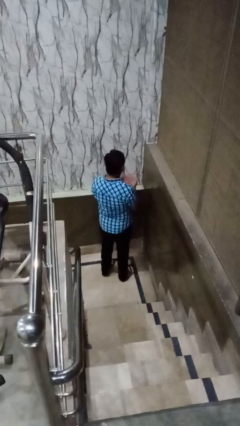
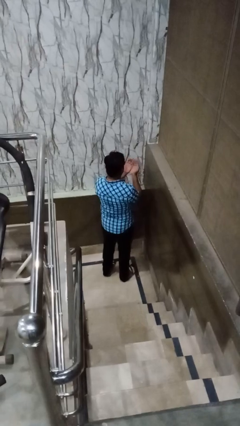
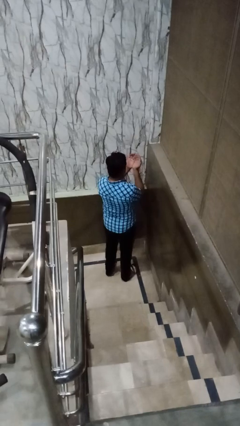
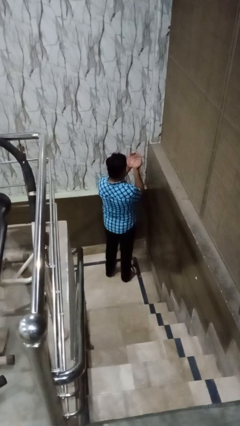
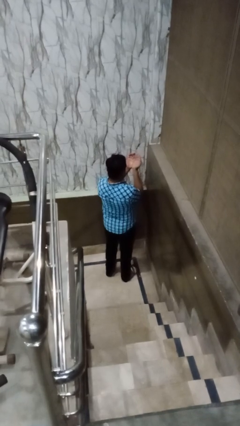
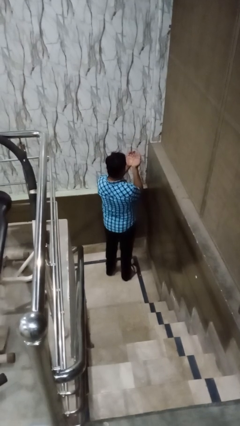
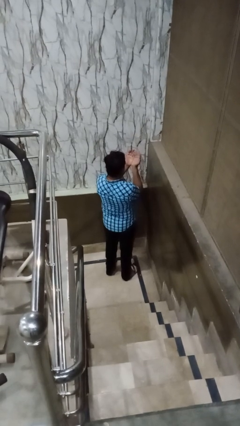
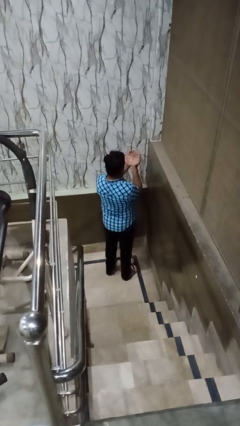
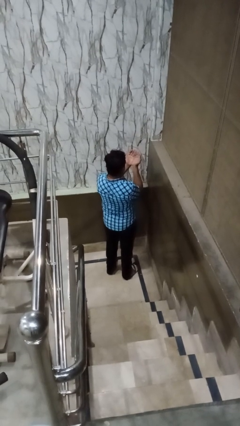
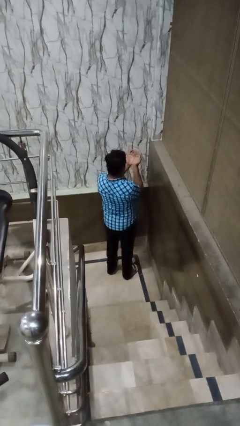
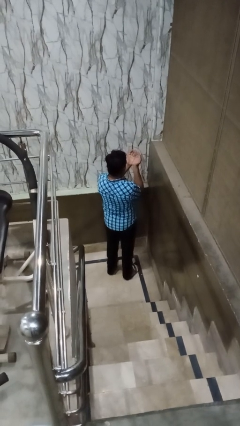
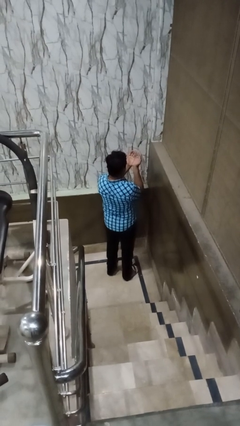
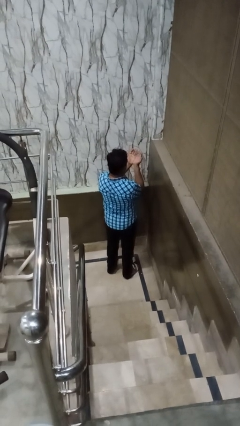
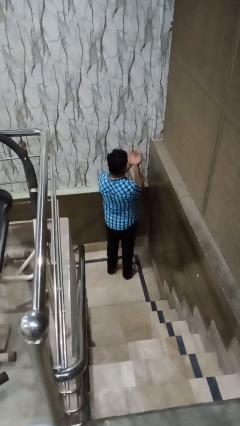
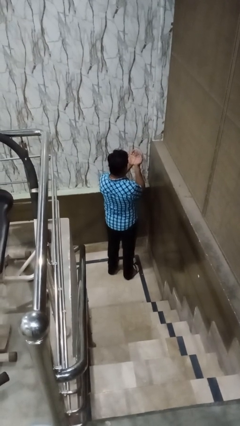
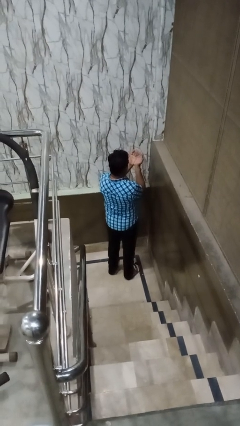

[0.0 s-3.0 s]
person prays

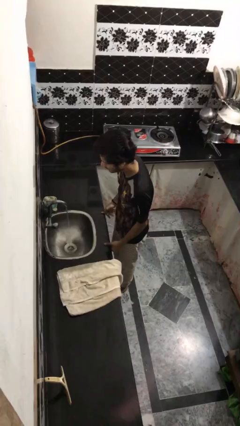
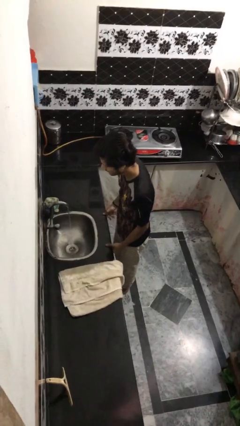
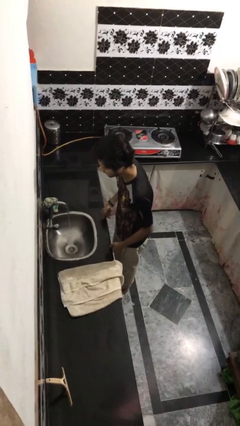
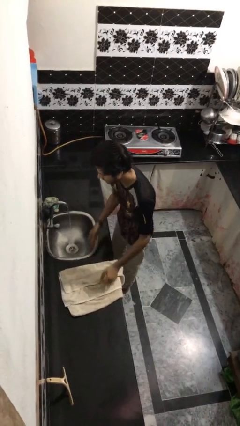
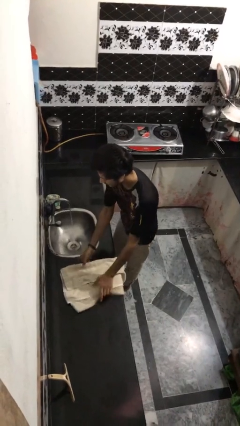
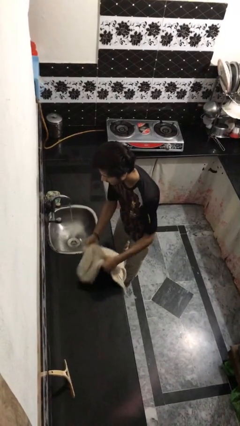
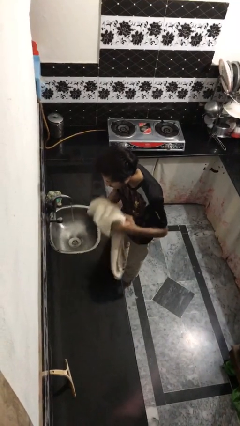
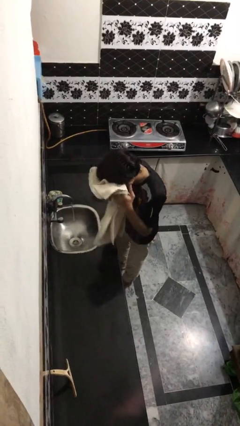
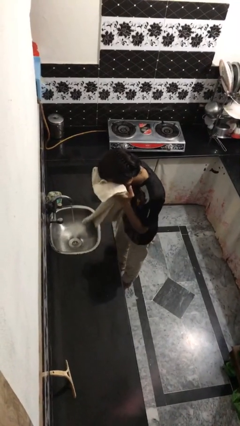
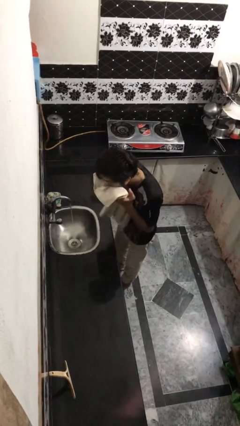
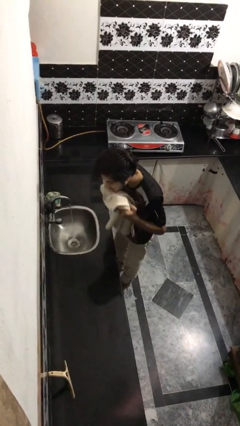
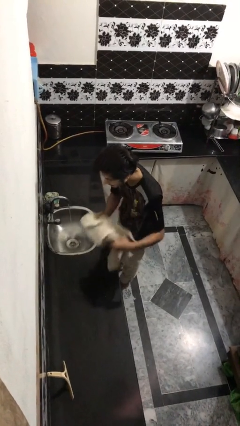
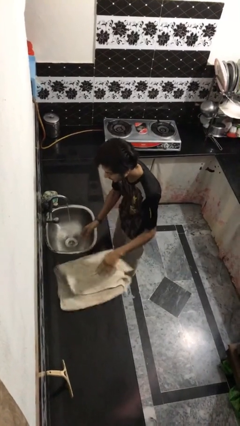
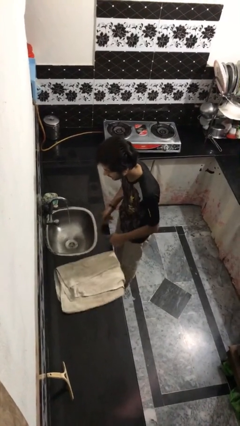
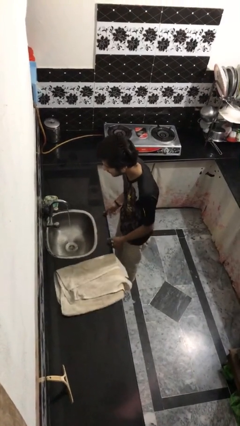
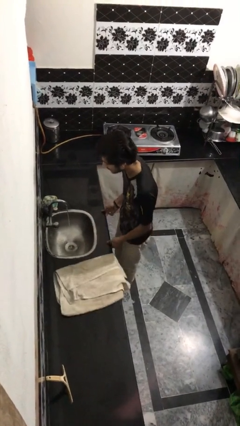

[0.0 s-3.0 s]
person dries face with towel

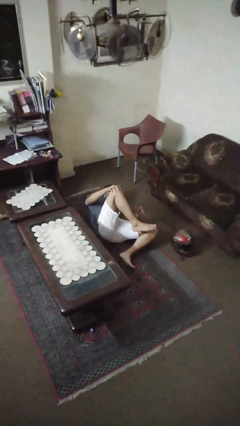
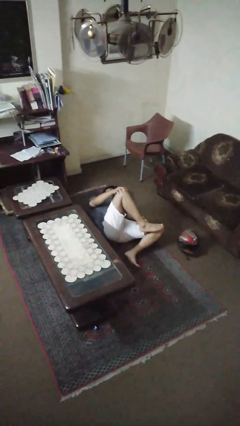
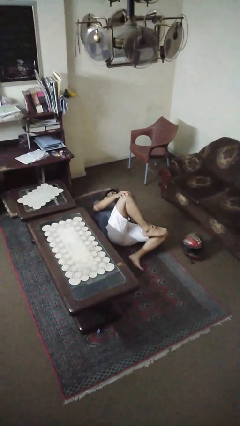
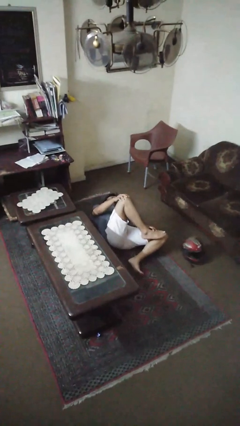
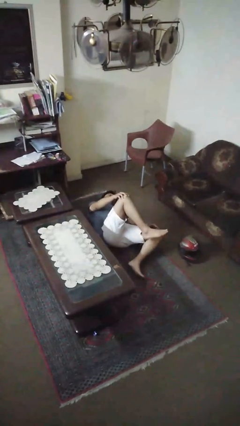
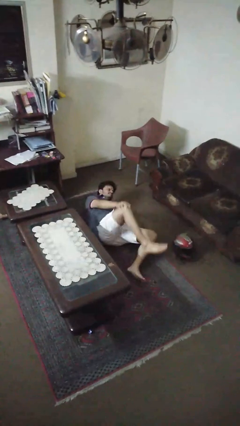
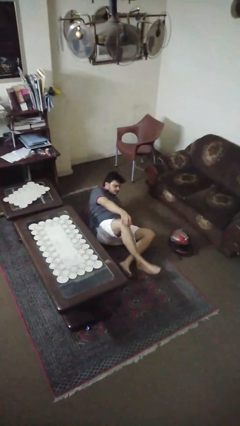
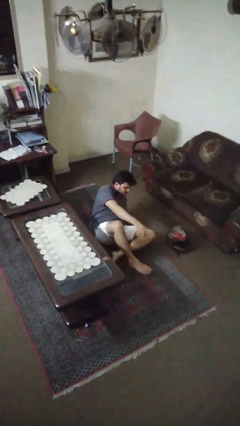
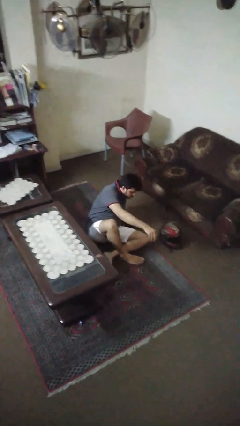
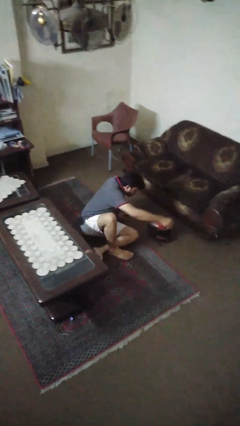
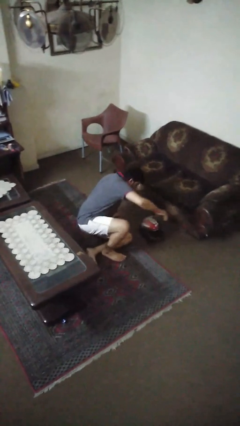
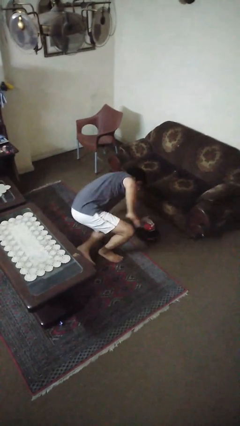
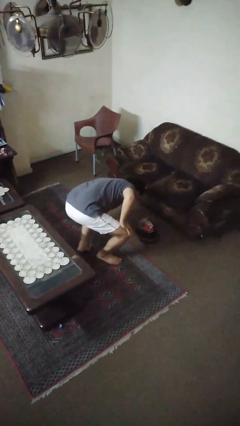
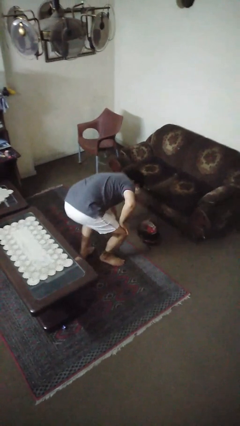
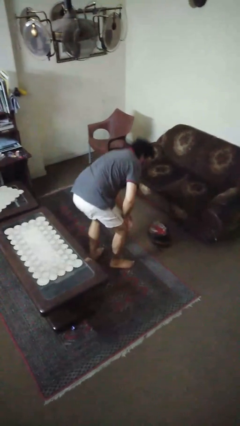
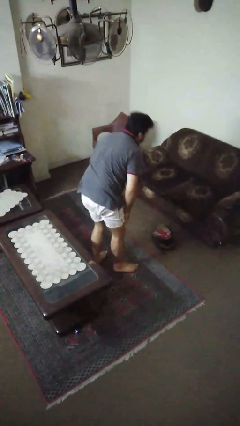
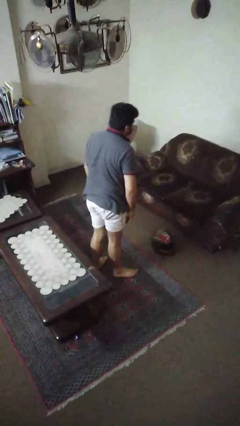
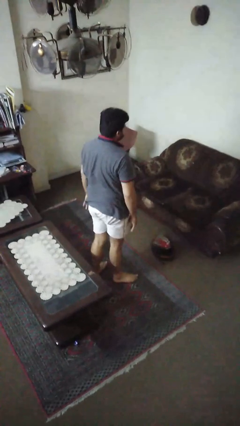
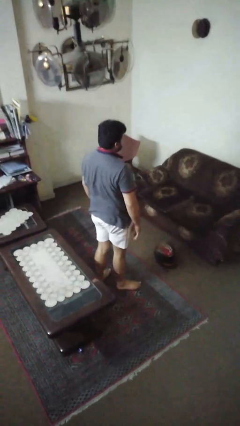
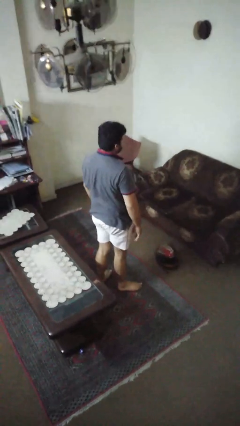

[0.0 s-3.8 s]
person stands up from floor

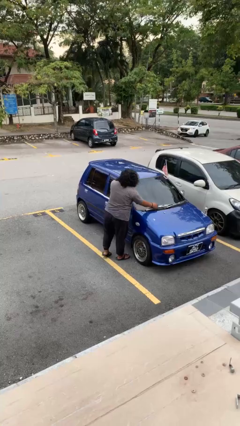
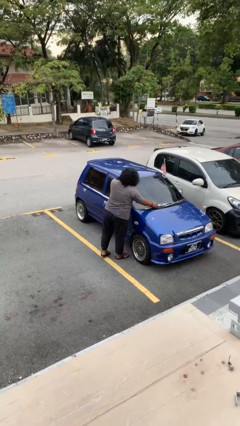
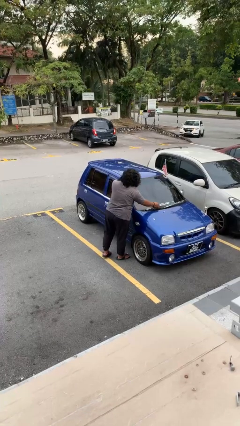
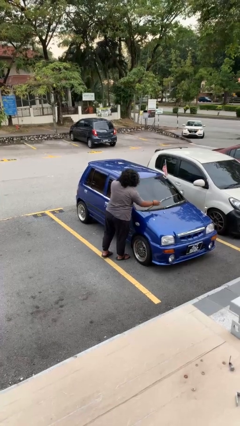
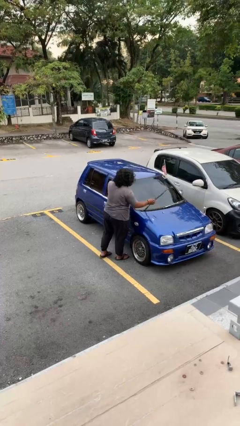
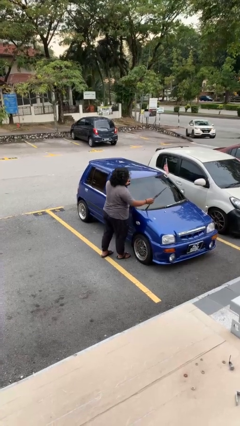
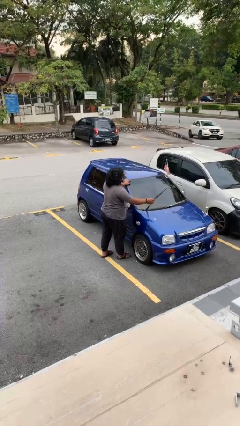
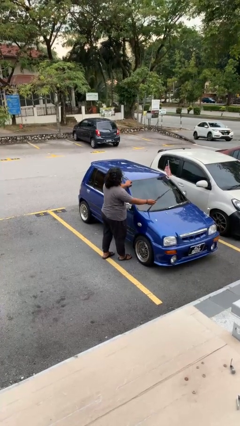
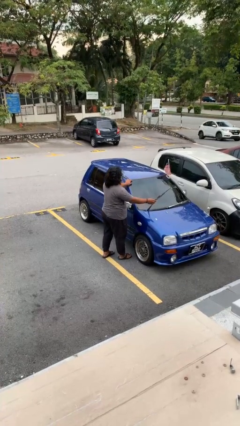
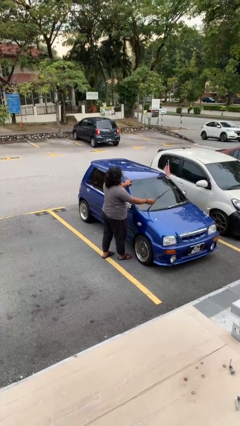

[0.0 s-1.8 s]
person flips up car wipers

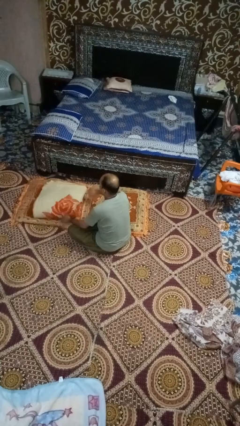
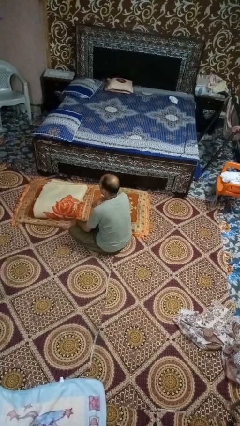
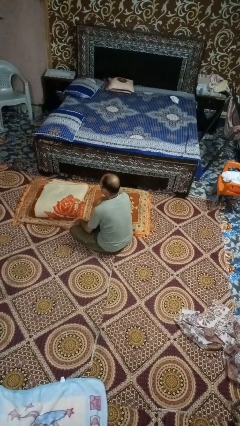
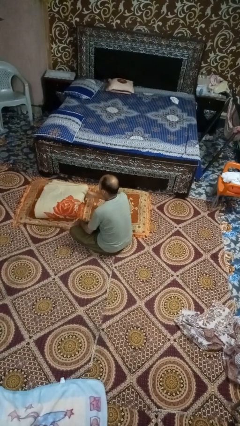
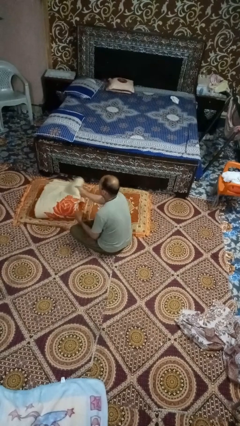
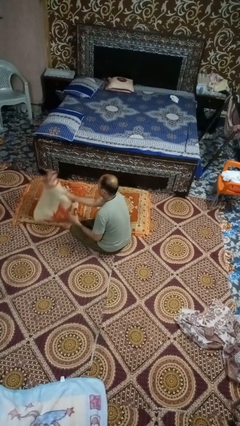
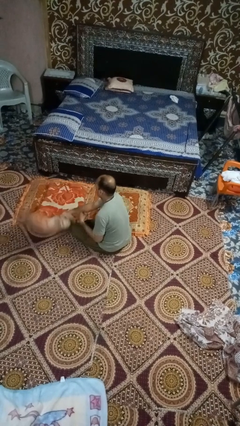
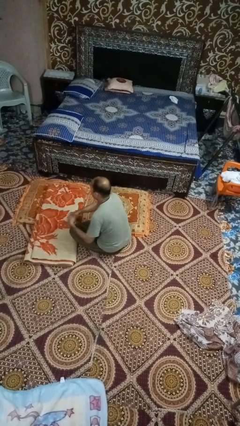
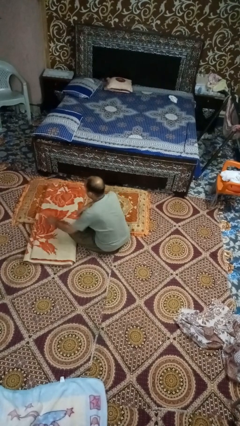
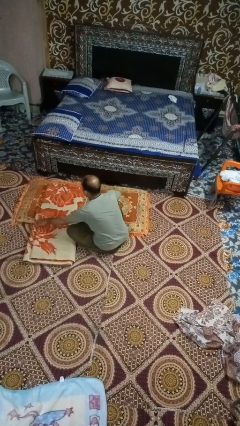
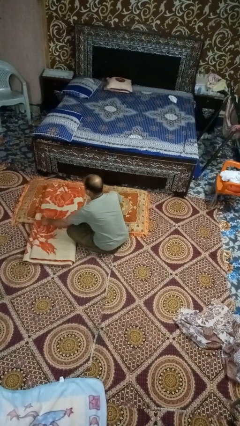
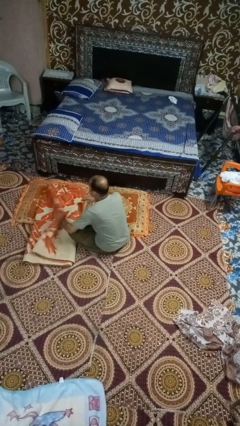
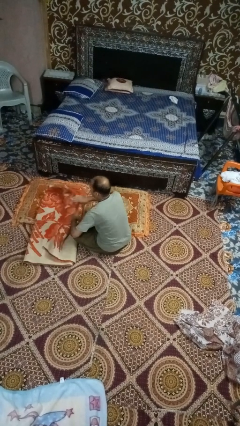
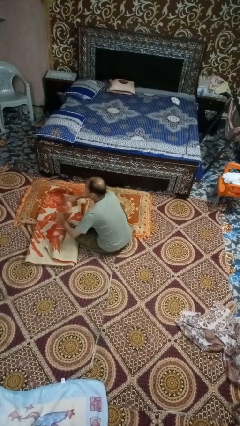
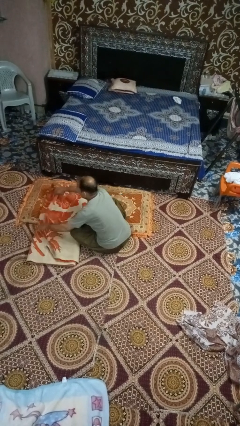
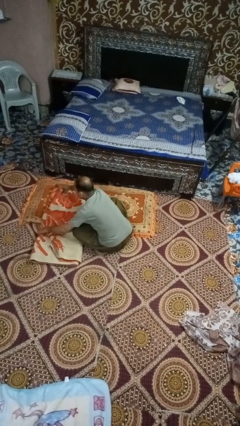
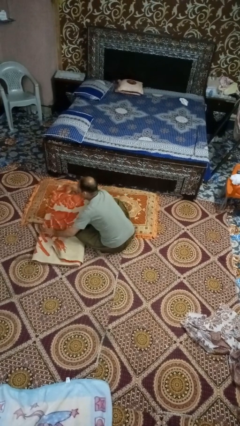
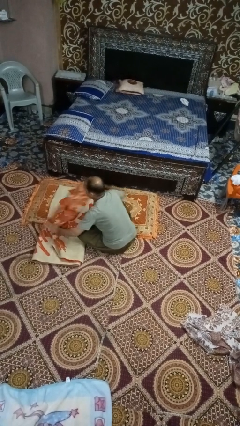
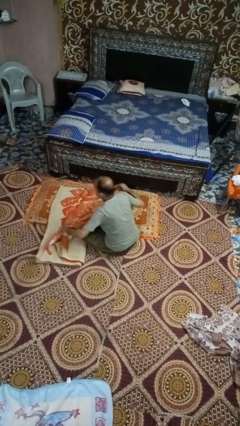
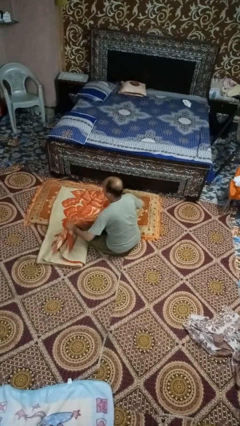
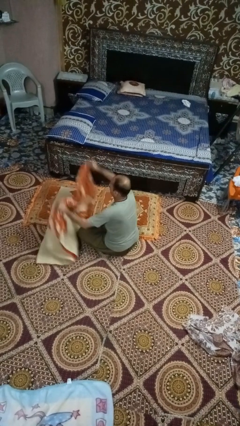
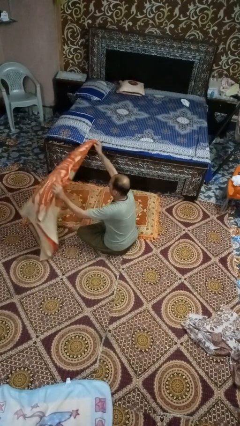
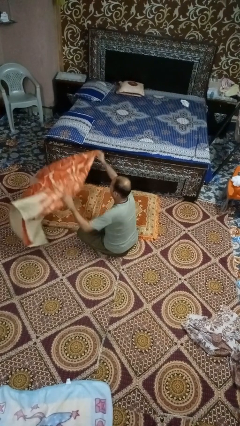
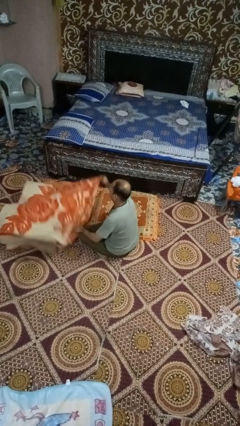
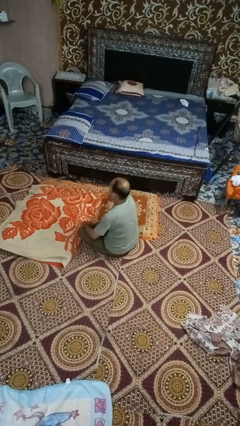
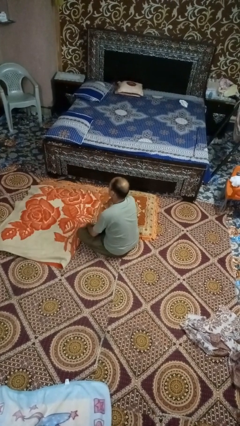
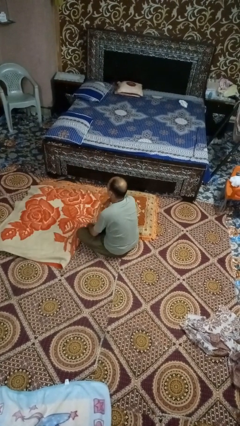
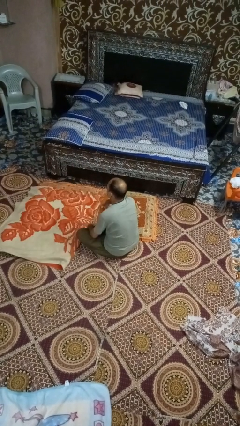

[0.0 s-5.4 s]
person unfolds blanket

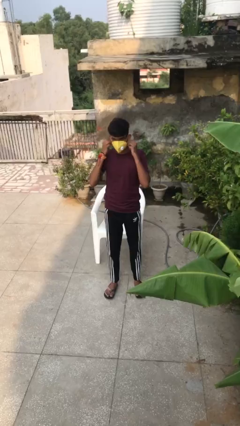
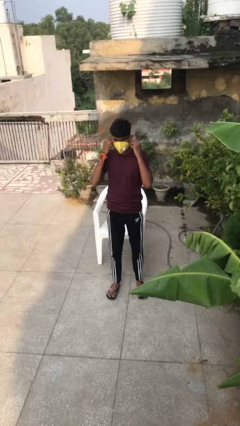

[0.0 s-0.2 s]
person takes off facemask
